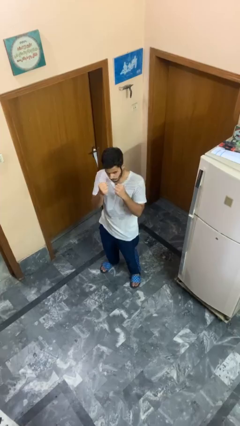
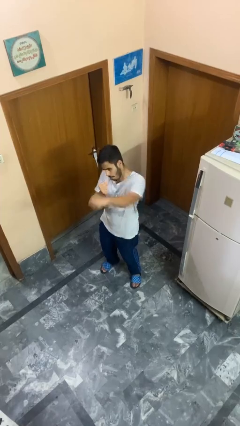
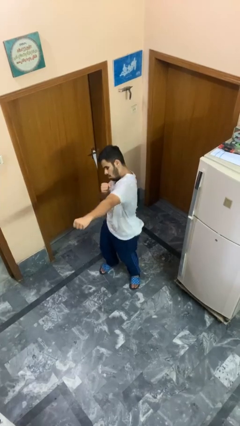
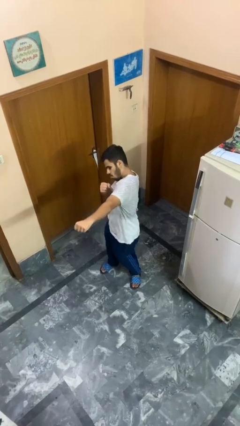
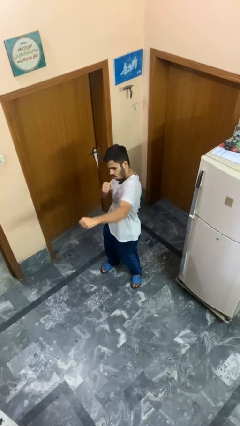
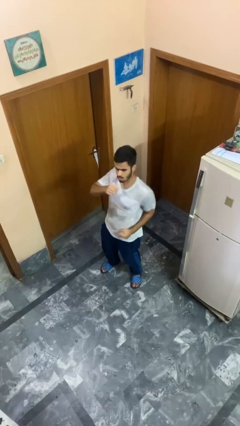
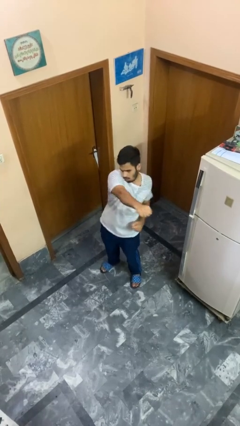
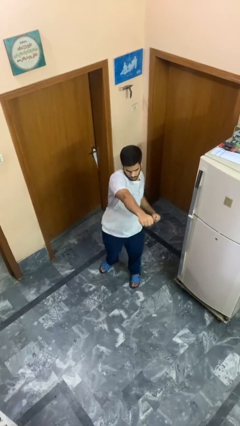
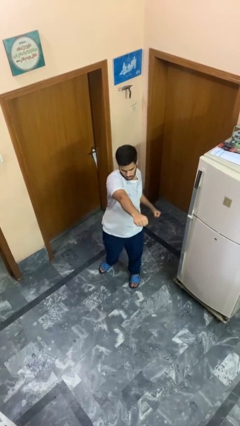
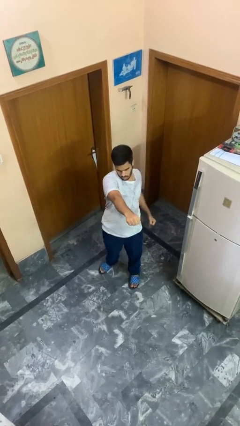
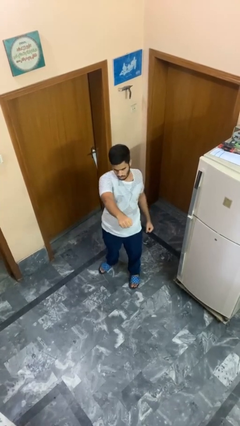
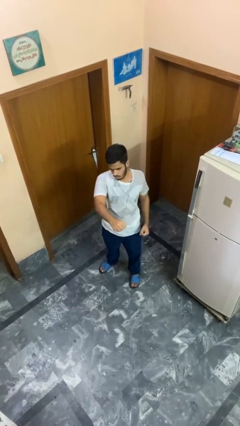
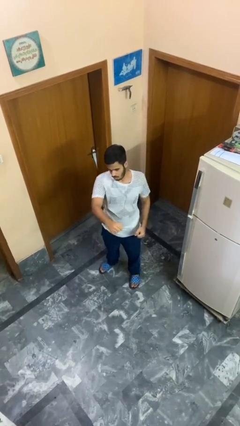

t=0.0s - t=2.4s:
person punches

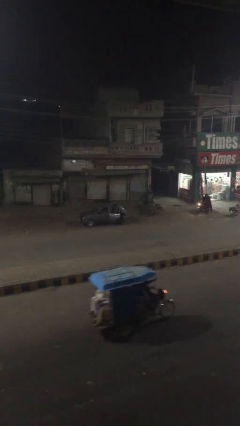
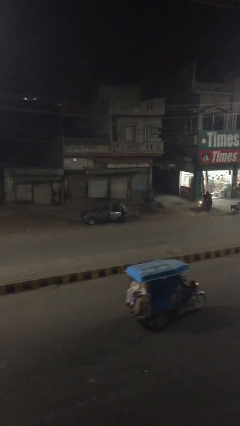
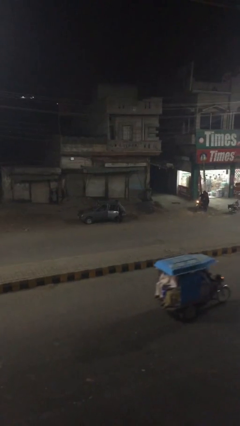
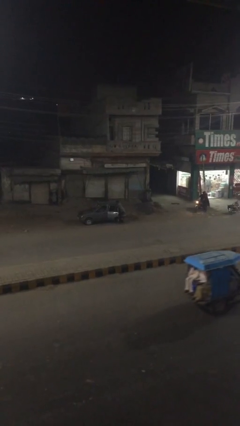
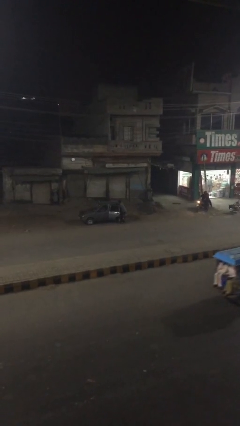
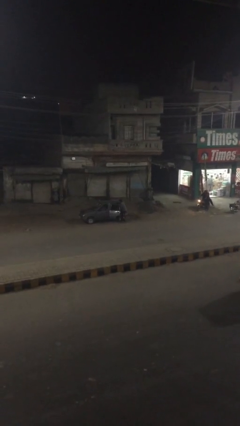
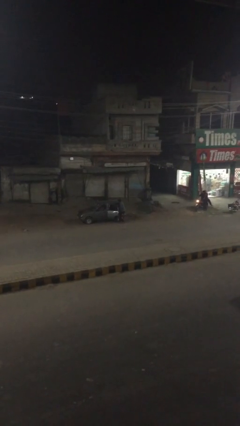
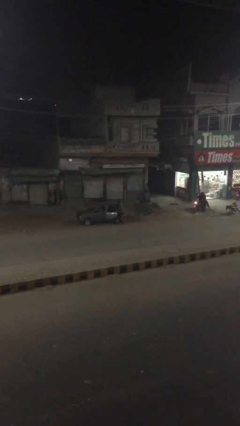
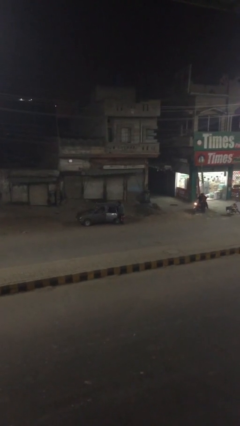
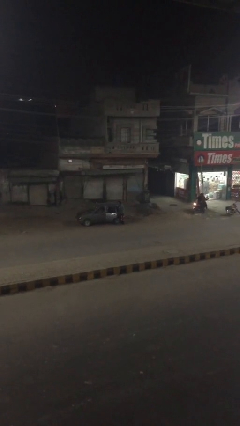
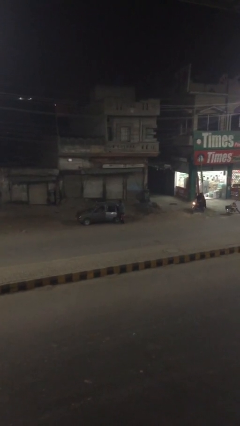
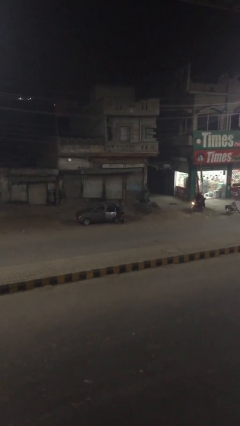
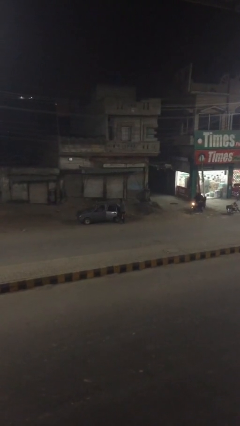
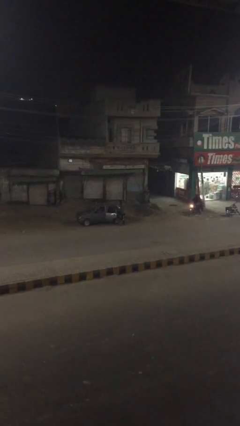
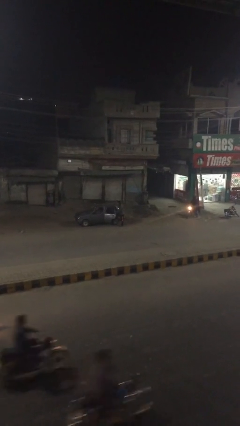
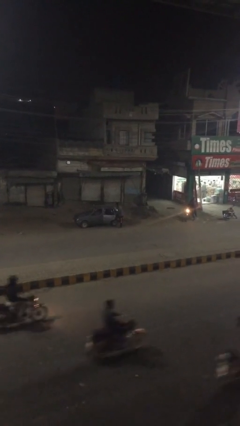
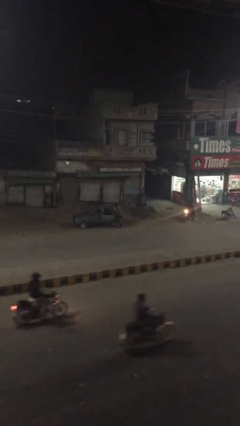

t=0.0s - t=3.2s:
person unloads car

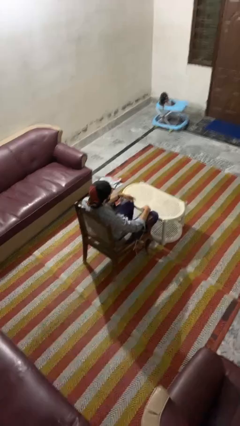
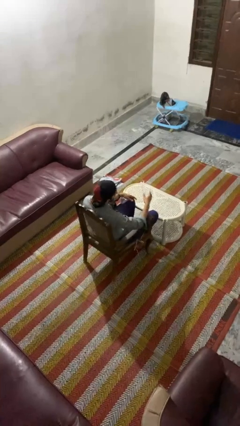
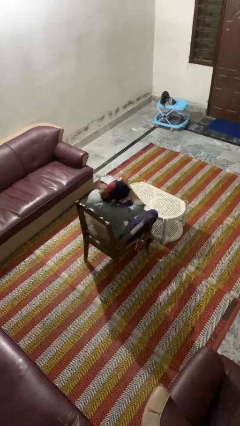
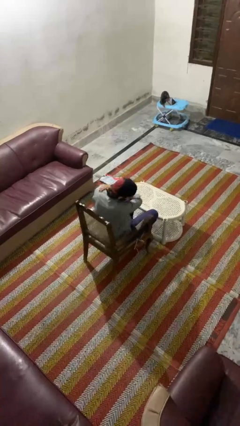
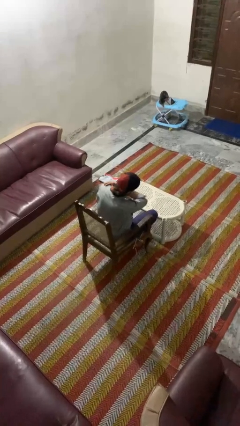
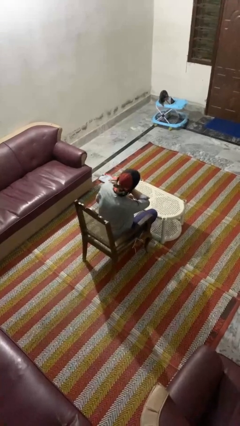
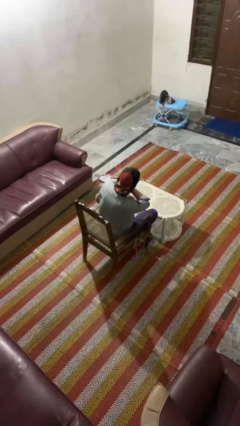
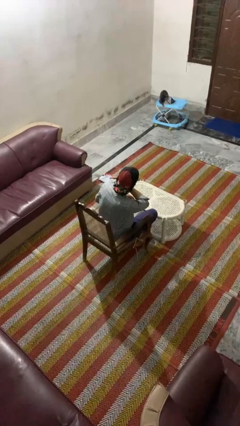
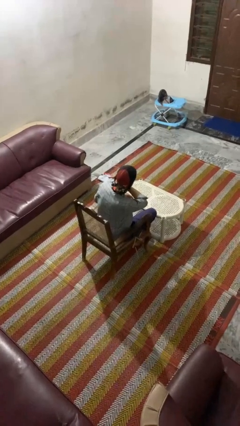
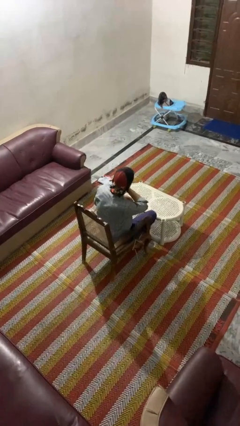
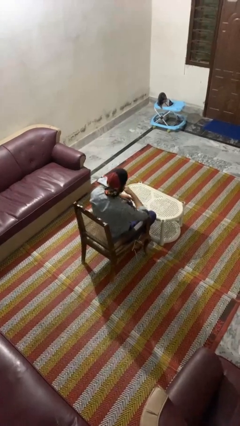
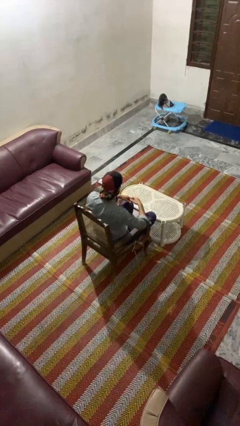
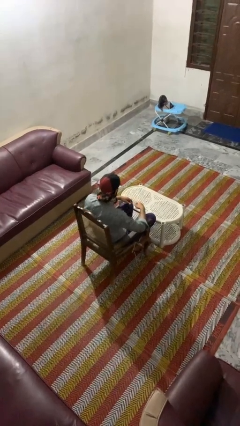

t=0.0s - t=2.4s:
person swats bug

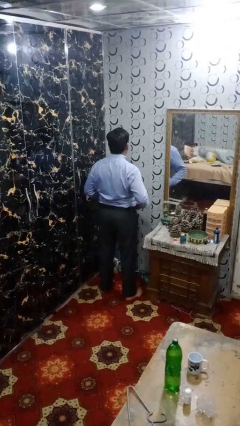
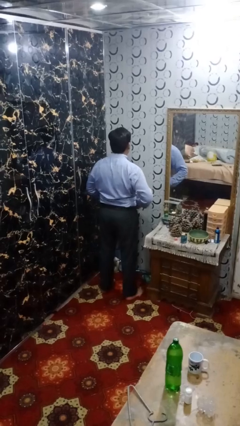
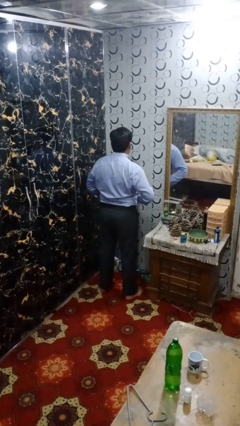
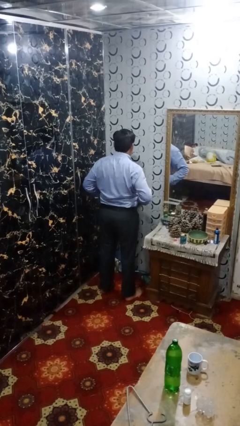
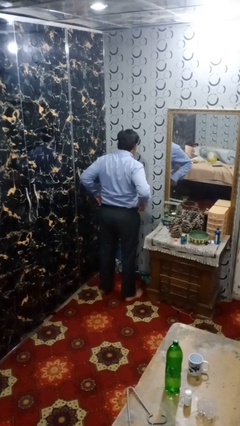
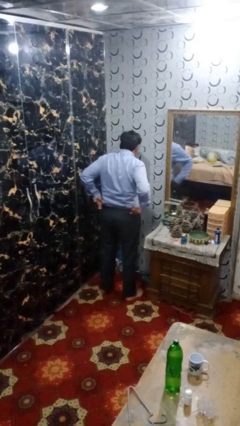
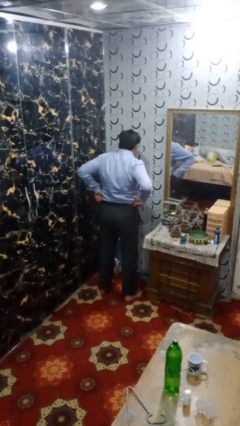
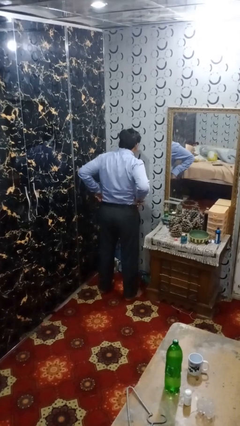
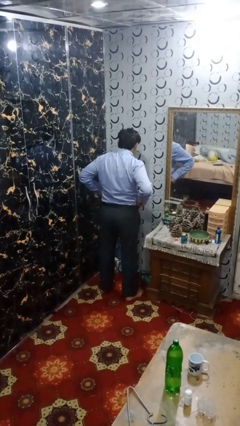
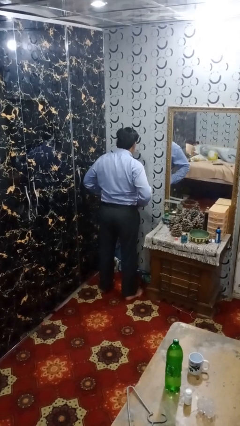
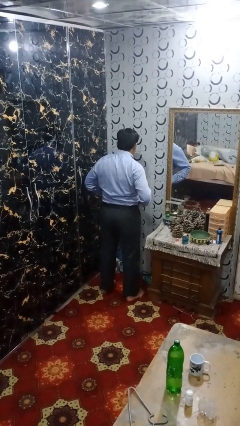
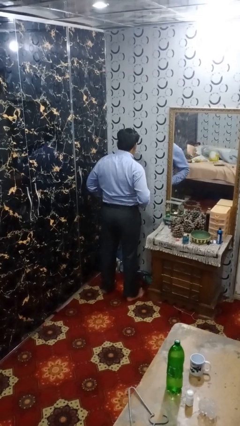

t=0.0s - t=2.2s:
person hikes up pants

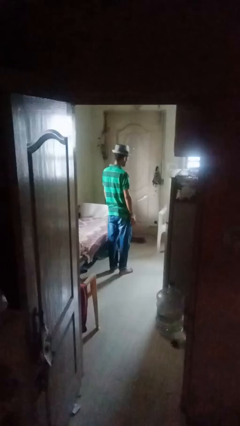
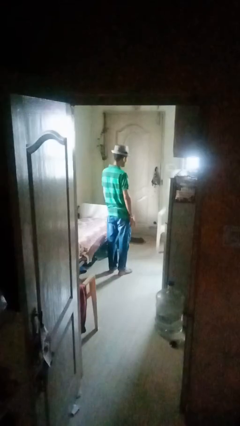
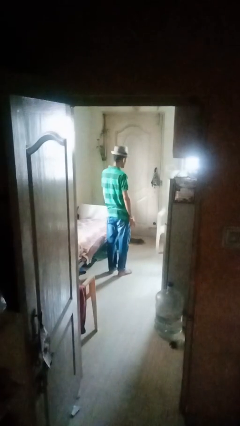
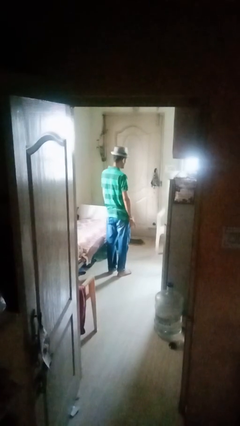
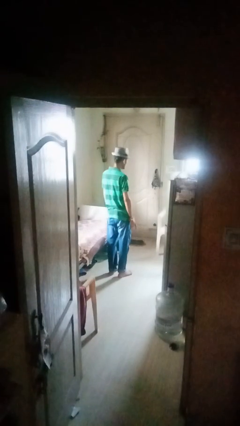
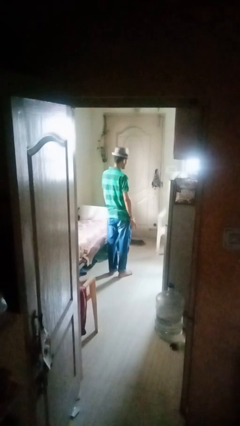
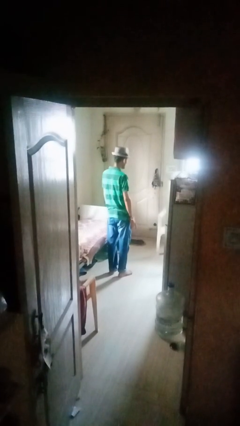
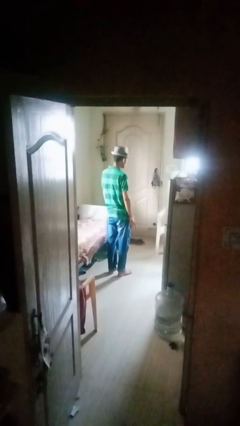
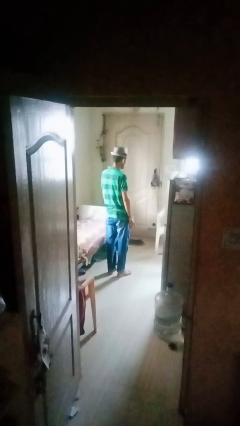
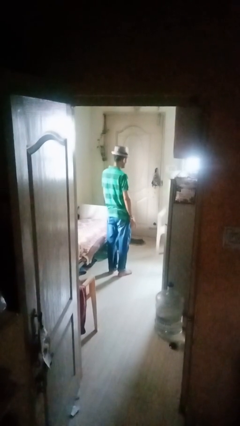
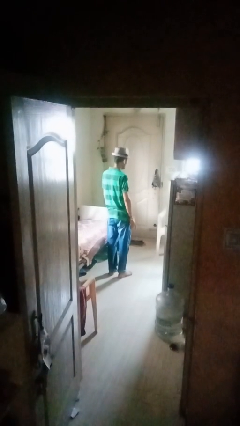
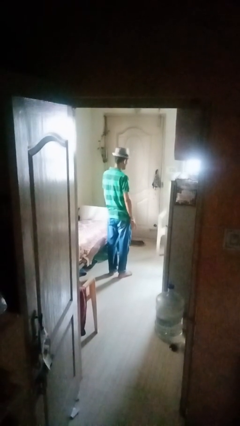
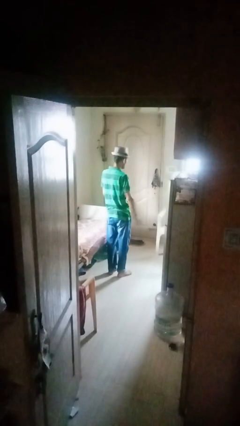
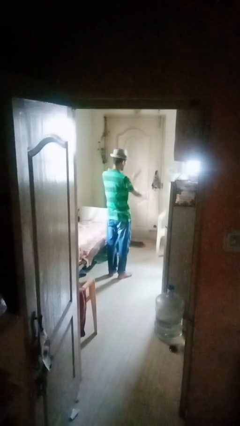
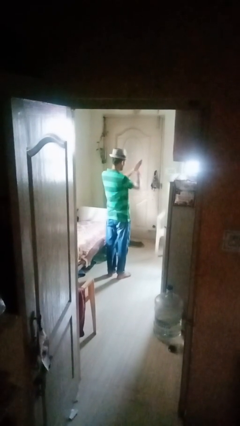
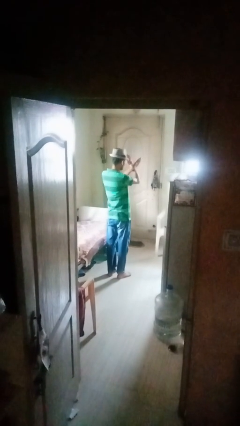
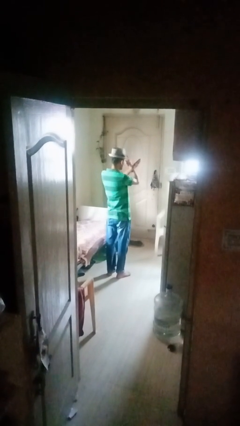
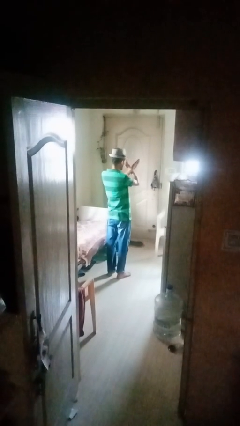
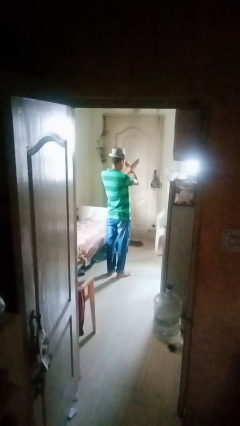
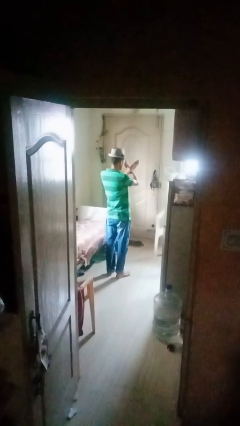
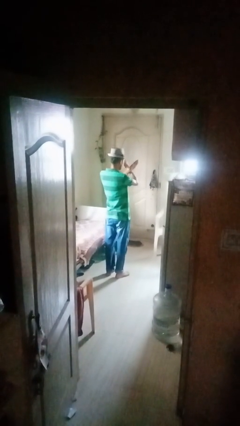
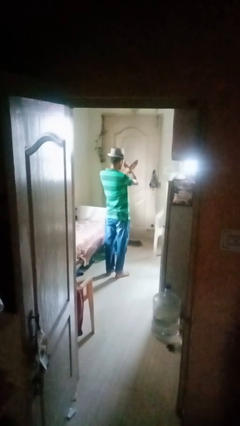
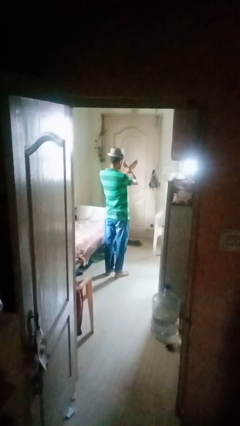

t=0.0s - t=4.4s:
person gestures arms x

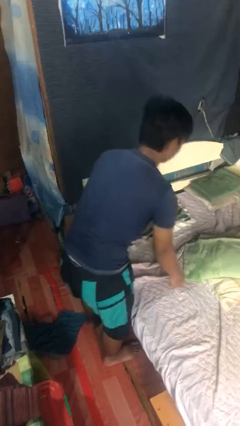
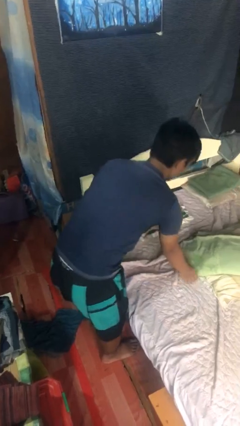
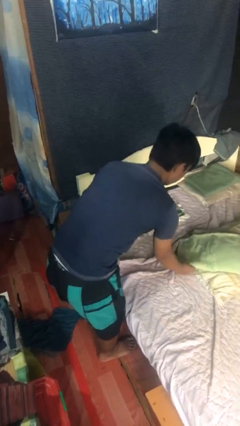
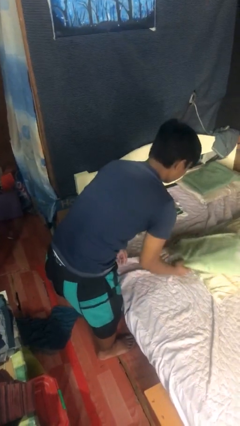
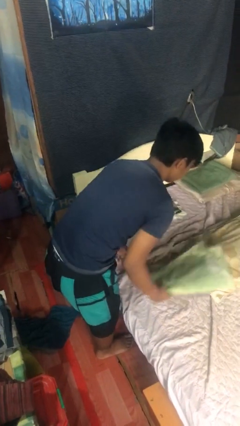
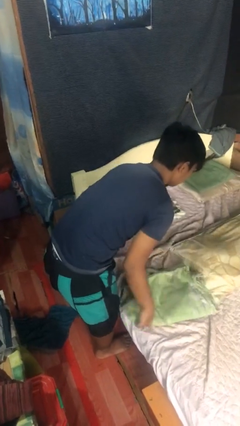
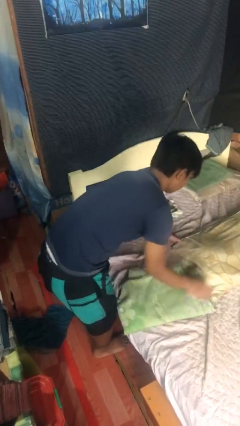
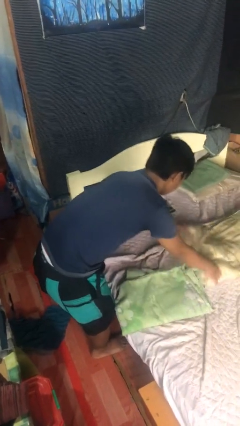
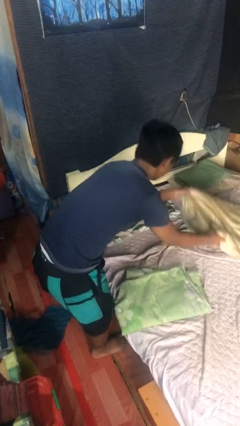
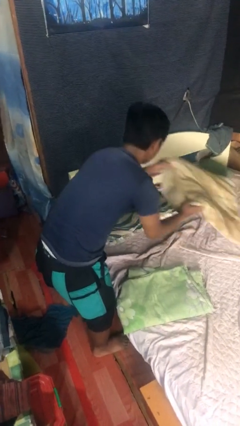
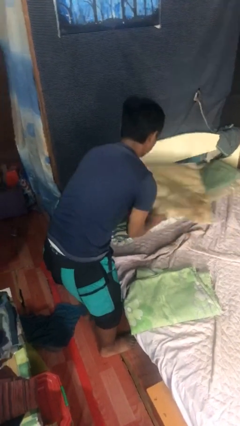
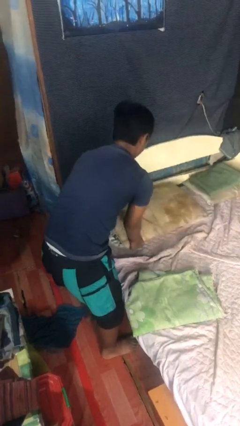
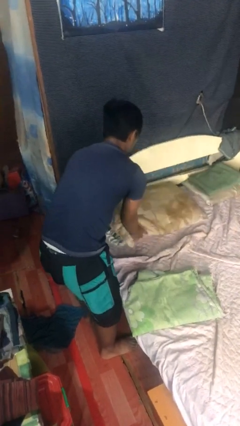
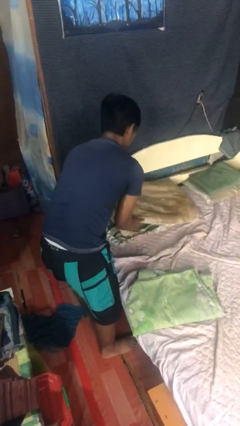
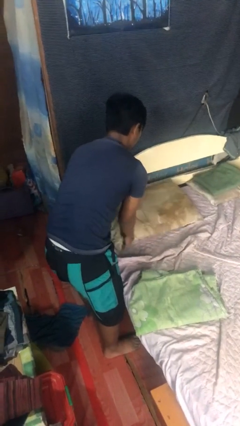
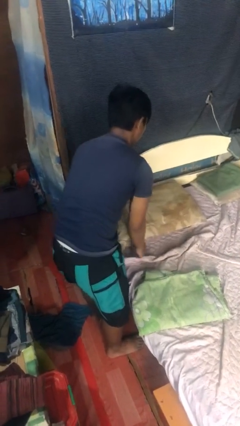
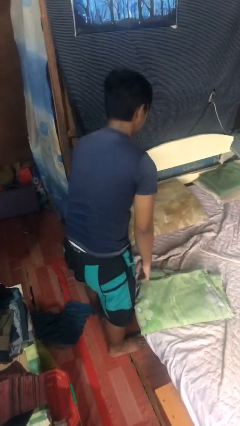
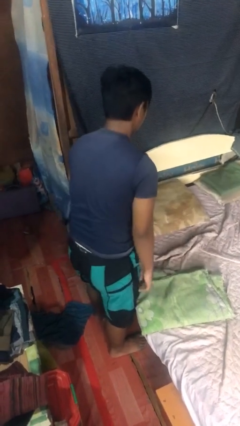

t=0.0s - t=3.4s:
person makes bed
